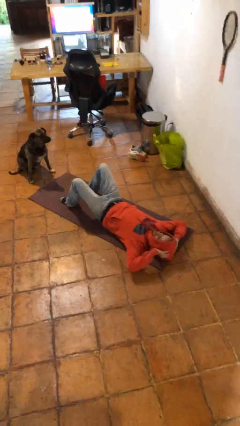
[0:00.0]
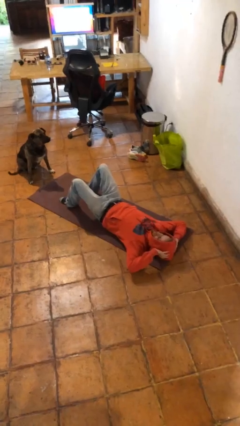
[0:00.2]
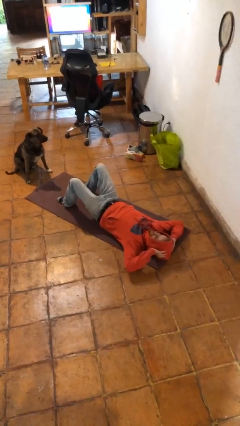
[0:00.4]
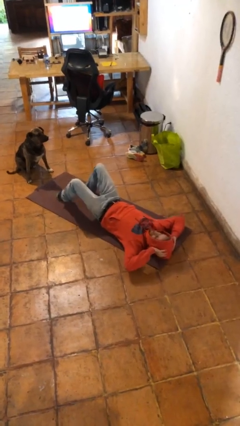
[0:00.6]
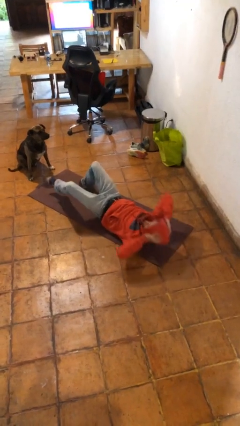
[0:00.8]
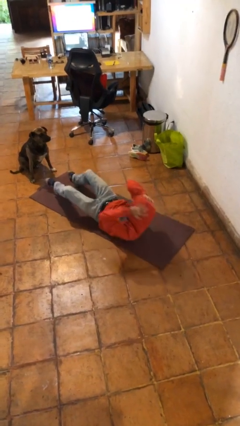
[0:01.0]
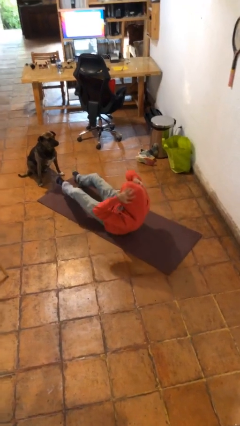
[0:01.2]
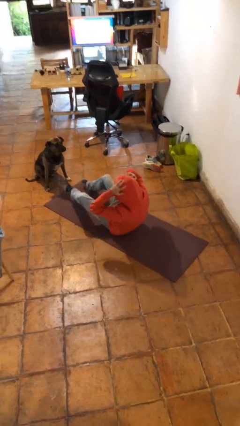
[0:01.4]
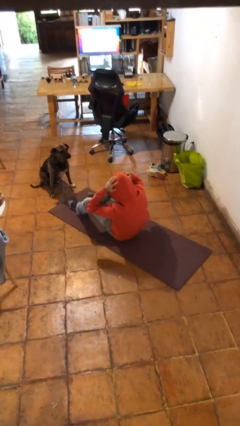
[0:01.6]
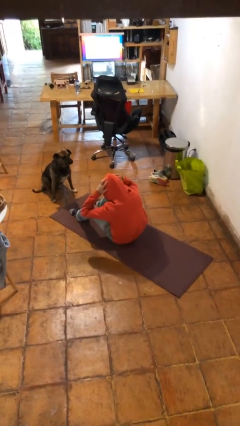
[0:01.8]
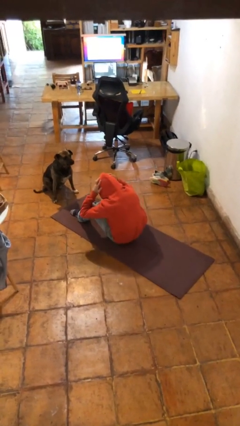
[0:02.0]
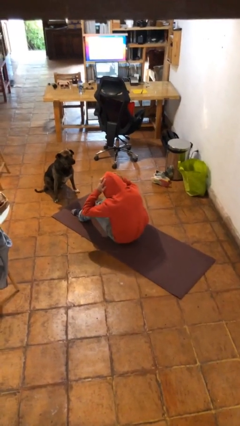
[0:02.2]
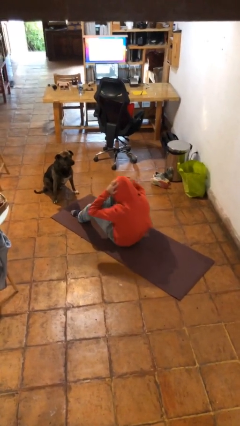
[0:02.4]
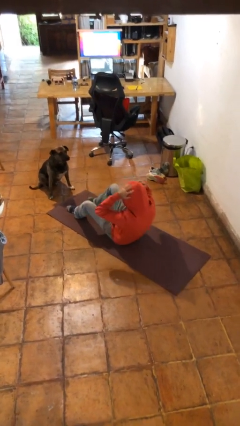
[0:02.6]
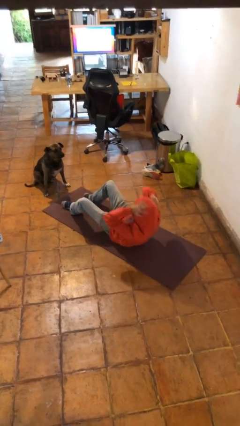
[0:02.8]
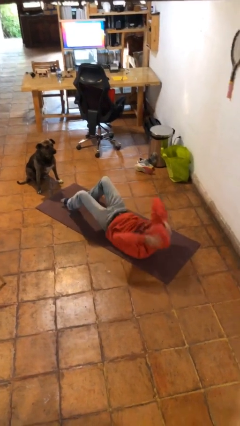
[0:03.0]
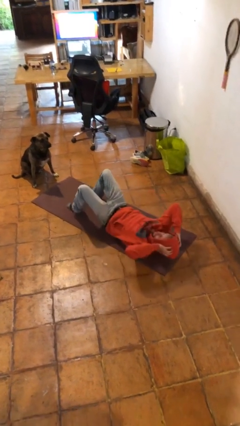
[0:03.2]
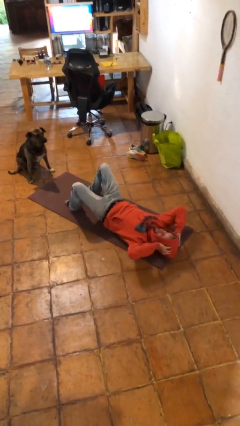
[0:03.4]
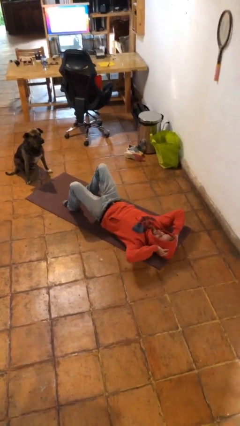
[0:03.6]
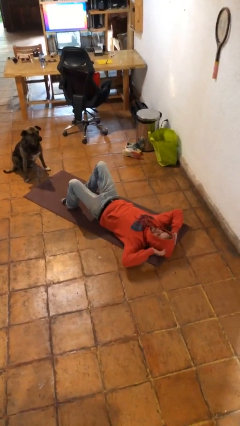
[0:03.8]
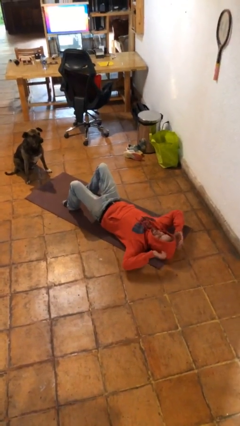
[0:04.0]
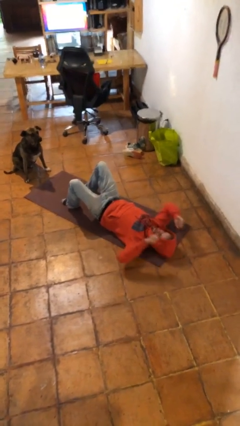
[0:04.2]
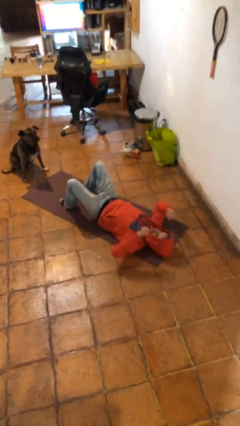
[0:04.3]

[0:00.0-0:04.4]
person exercises with situp

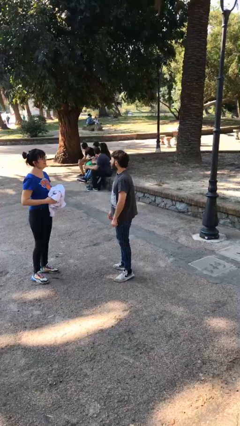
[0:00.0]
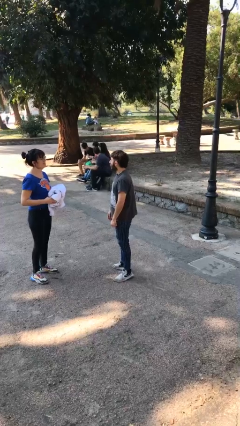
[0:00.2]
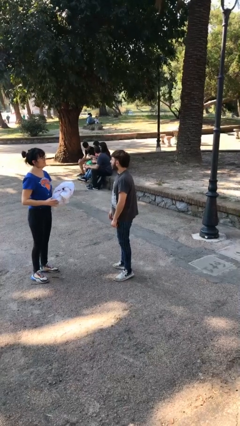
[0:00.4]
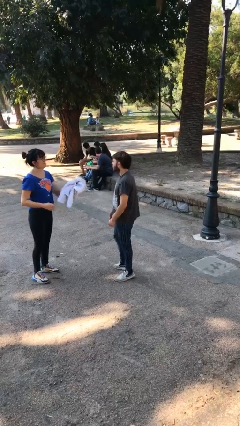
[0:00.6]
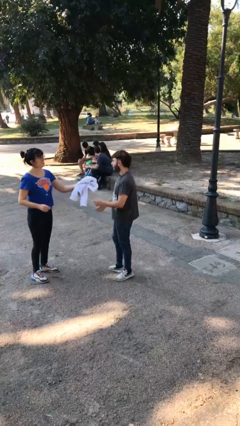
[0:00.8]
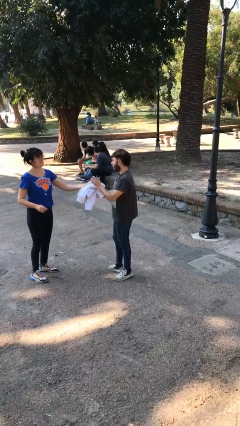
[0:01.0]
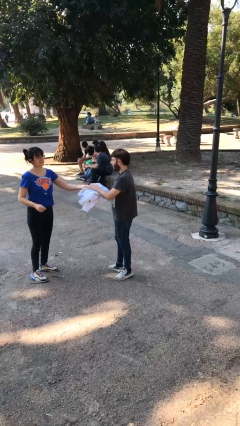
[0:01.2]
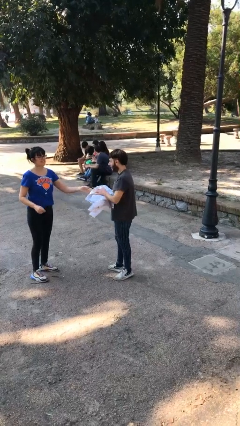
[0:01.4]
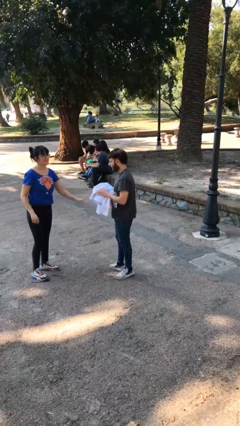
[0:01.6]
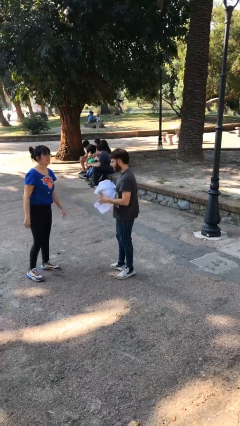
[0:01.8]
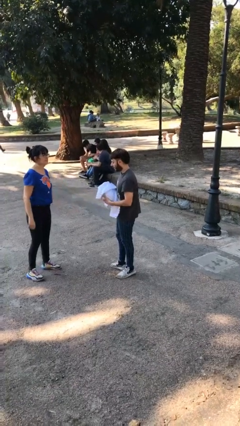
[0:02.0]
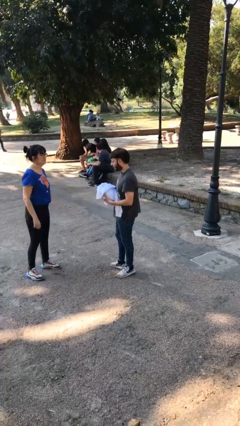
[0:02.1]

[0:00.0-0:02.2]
person transfers object to person

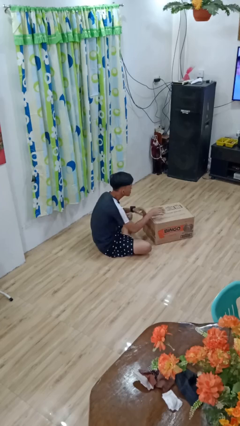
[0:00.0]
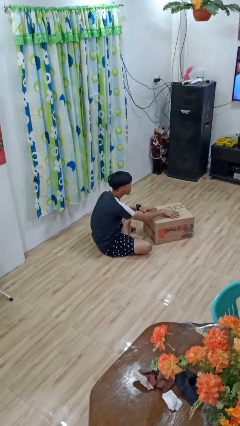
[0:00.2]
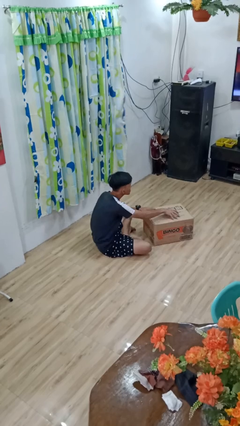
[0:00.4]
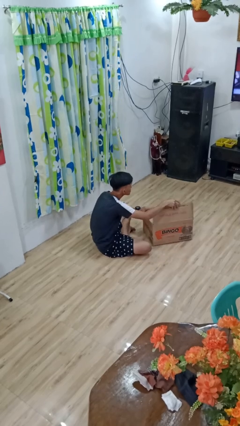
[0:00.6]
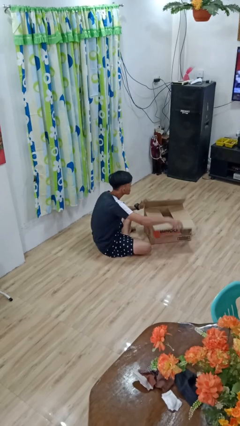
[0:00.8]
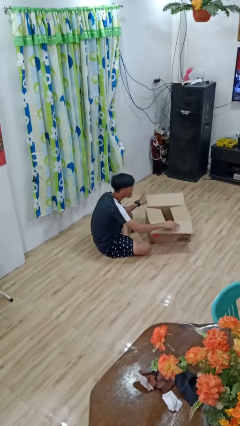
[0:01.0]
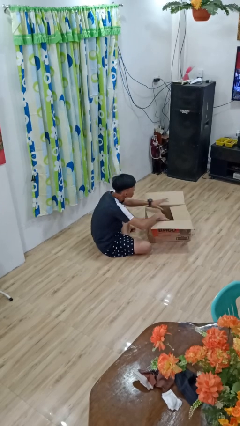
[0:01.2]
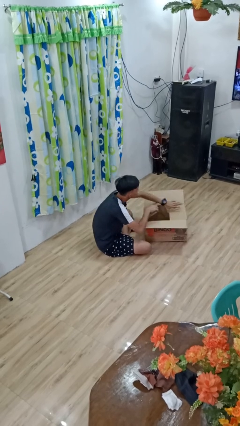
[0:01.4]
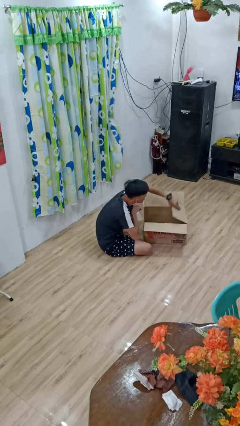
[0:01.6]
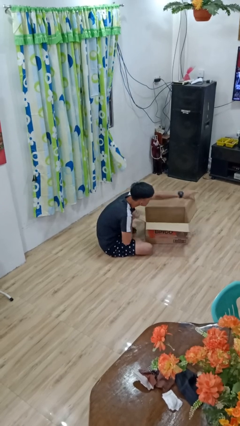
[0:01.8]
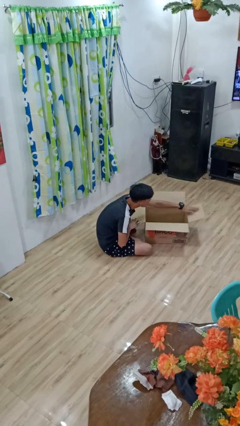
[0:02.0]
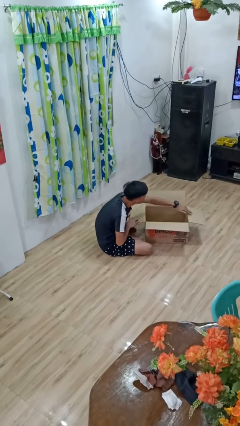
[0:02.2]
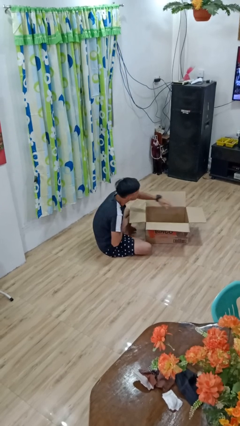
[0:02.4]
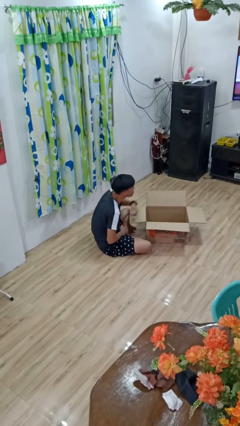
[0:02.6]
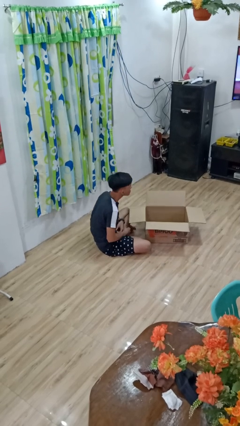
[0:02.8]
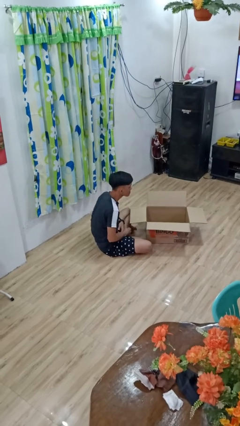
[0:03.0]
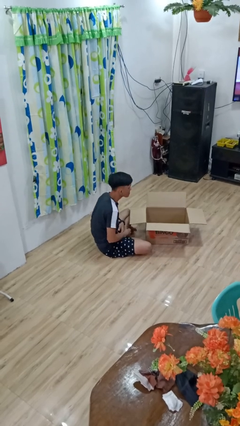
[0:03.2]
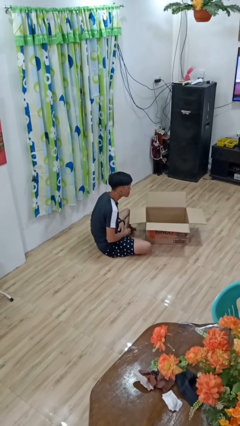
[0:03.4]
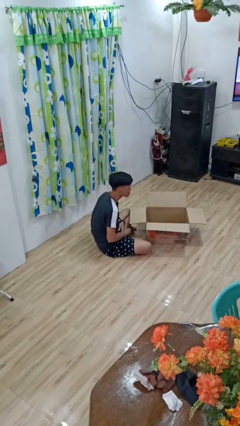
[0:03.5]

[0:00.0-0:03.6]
person opens box

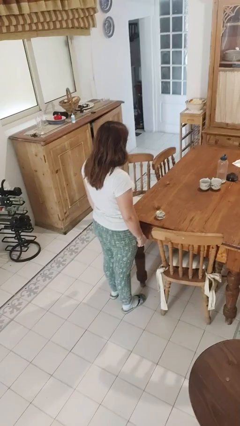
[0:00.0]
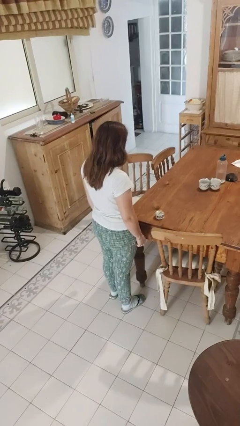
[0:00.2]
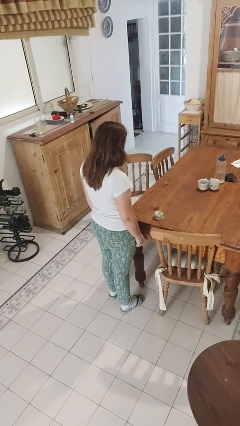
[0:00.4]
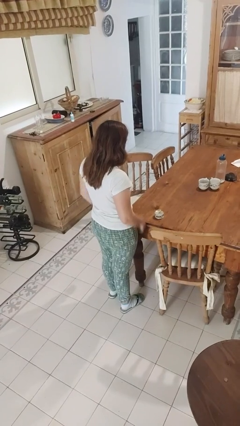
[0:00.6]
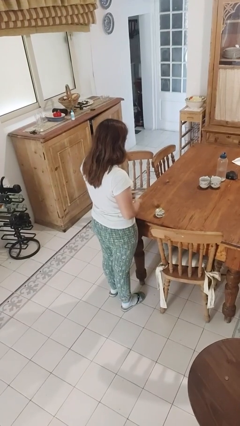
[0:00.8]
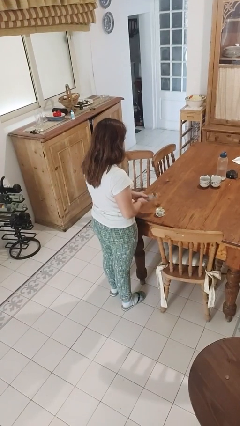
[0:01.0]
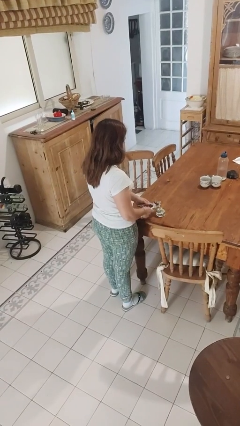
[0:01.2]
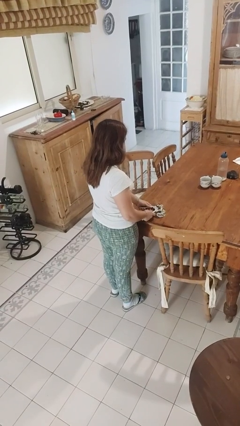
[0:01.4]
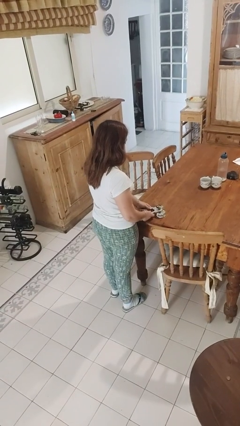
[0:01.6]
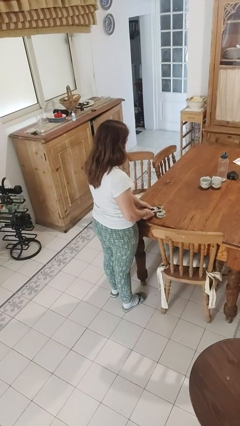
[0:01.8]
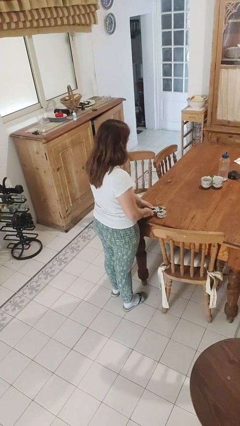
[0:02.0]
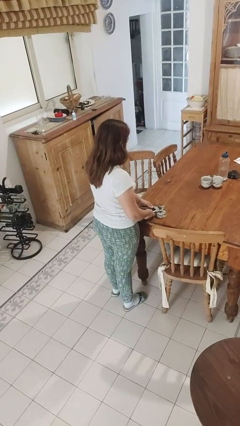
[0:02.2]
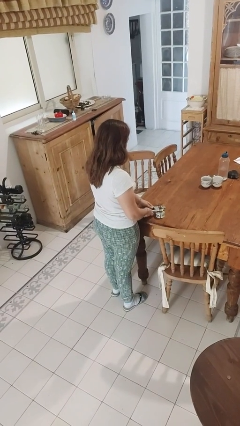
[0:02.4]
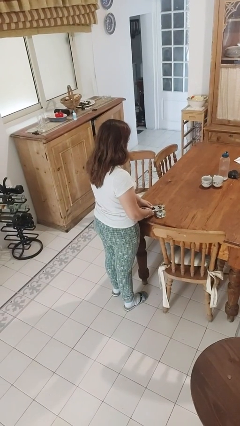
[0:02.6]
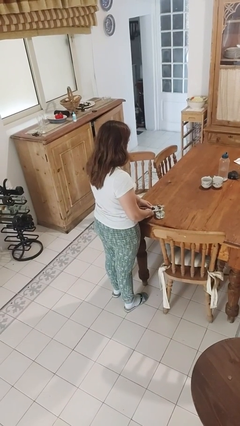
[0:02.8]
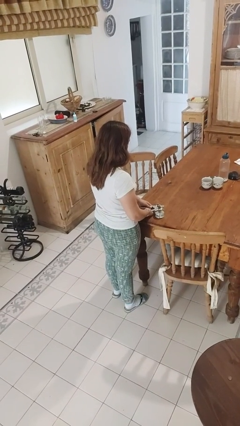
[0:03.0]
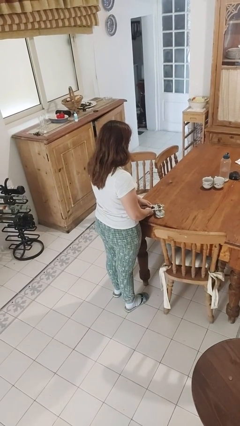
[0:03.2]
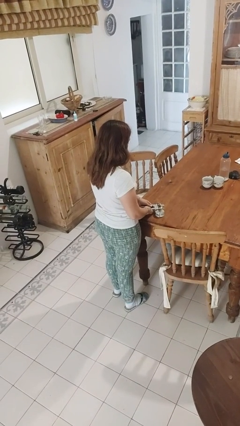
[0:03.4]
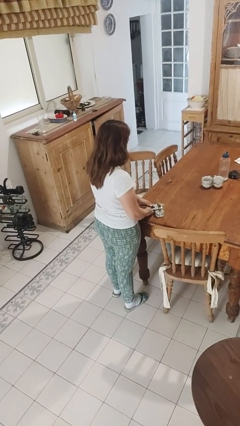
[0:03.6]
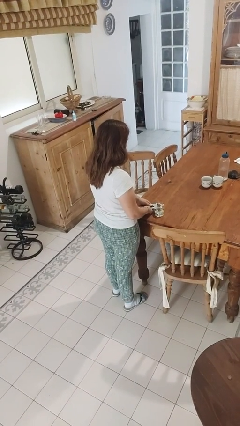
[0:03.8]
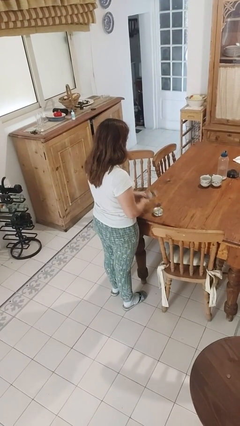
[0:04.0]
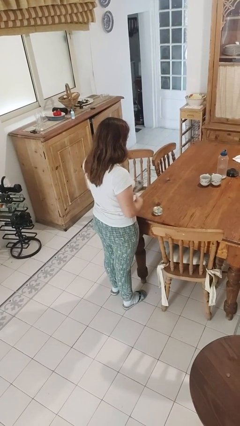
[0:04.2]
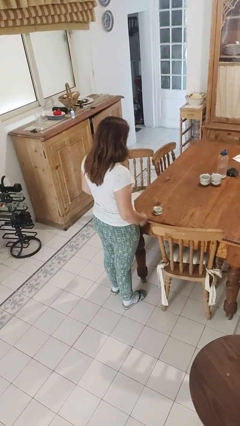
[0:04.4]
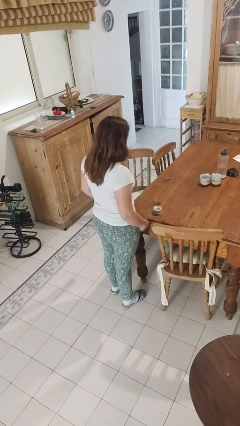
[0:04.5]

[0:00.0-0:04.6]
person opens can with can opener

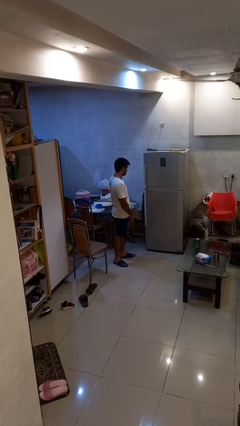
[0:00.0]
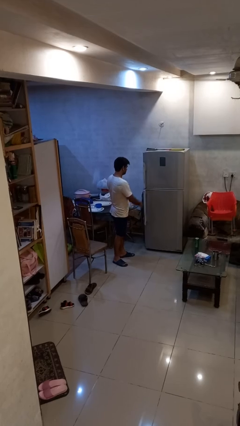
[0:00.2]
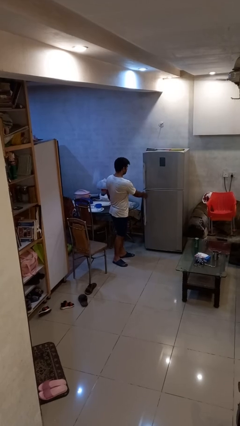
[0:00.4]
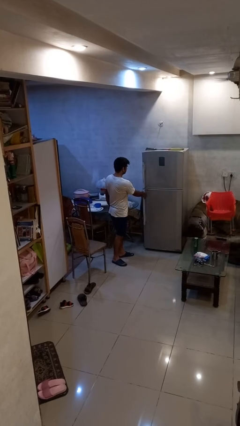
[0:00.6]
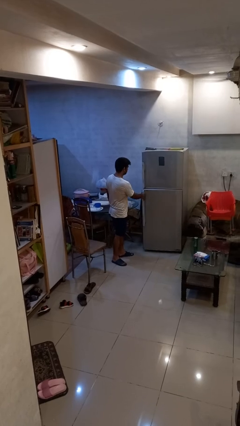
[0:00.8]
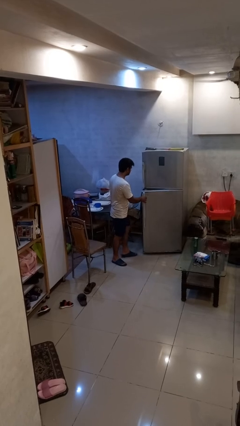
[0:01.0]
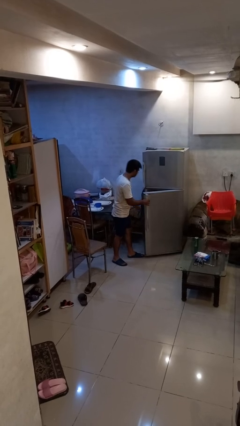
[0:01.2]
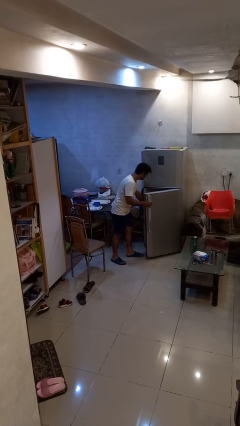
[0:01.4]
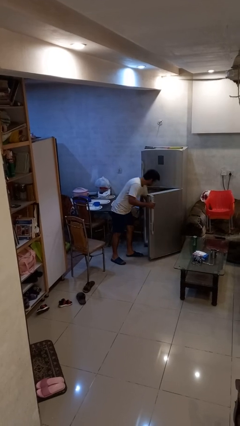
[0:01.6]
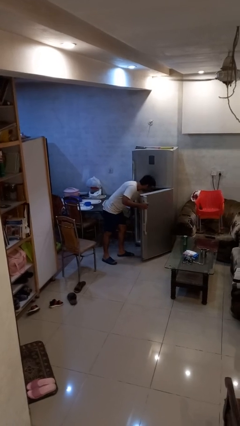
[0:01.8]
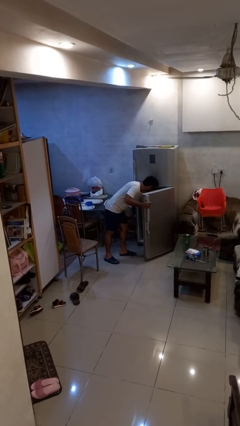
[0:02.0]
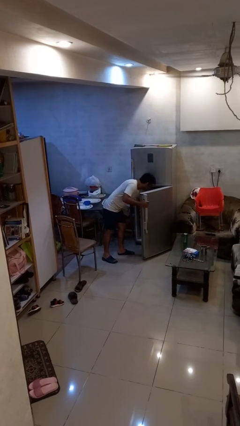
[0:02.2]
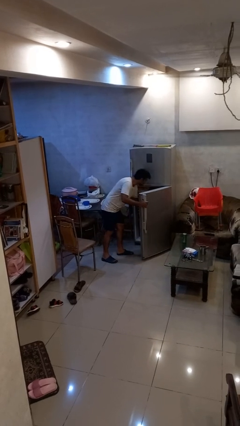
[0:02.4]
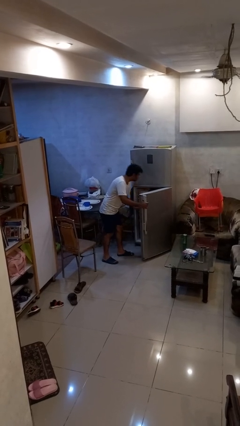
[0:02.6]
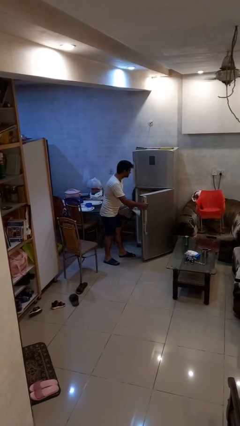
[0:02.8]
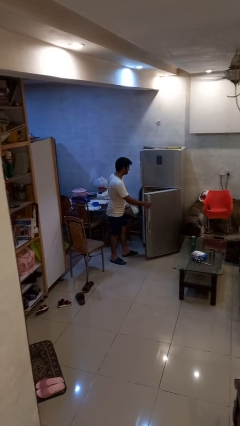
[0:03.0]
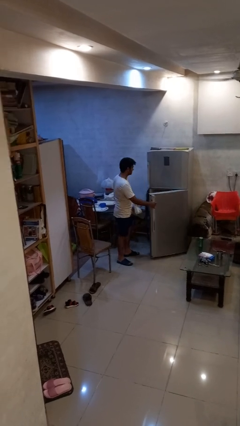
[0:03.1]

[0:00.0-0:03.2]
person takes object from refrigerator
